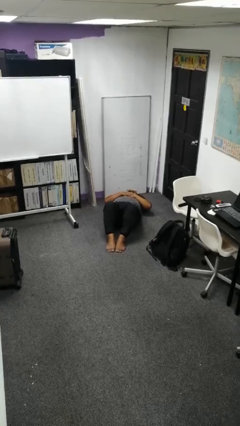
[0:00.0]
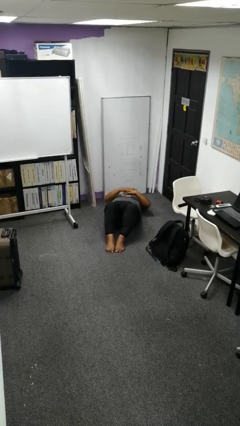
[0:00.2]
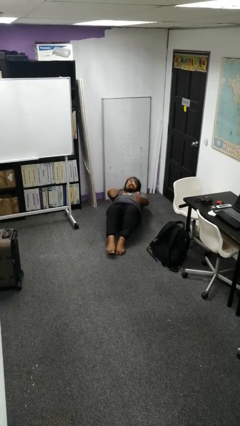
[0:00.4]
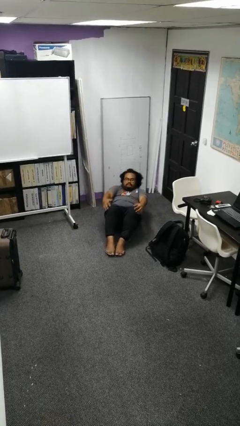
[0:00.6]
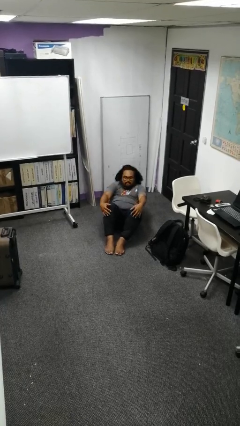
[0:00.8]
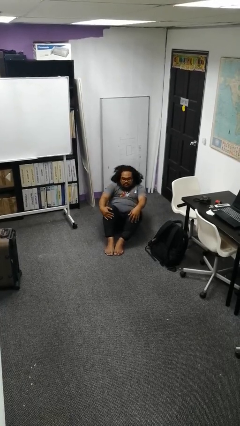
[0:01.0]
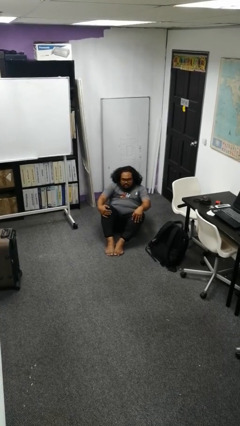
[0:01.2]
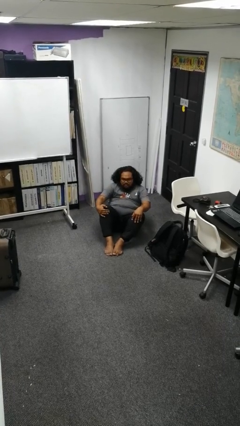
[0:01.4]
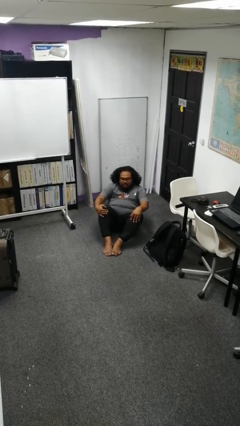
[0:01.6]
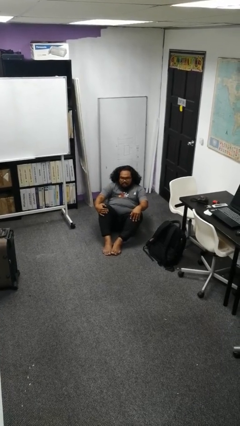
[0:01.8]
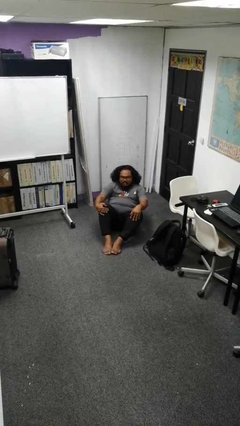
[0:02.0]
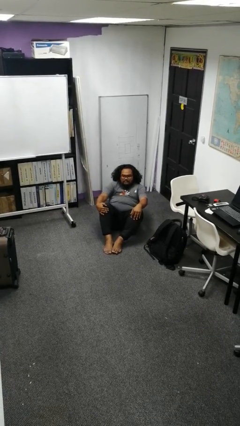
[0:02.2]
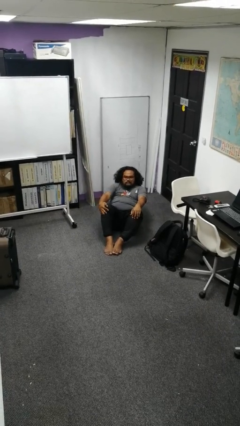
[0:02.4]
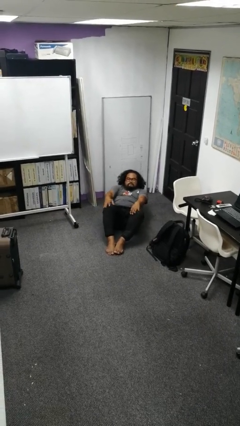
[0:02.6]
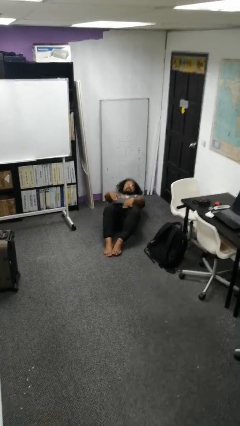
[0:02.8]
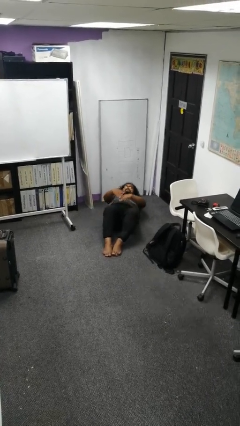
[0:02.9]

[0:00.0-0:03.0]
person exercises with situp

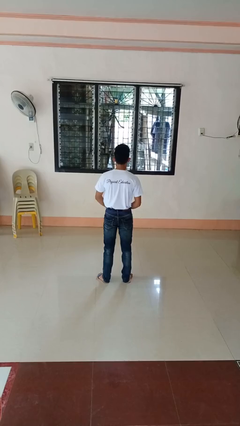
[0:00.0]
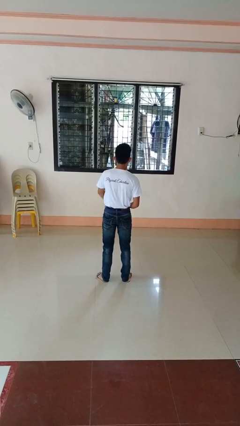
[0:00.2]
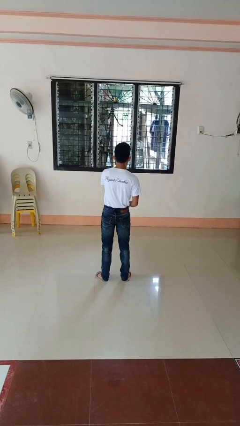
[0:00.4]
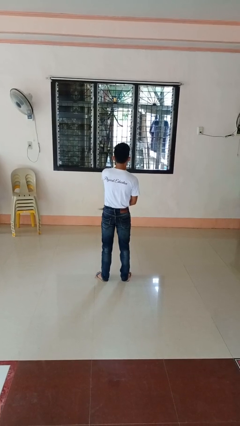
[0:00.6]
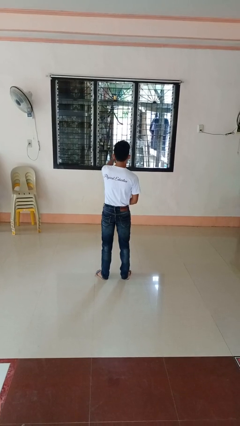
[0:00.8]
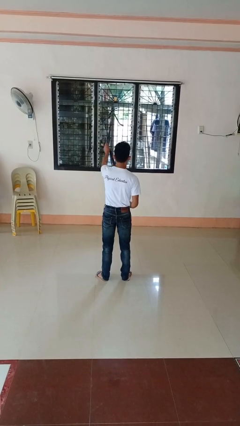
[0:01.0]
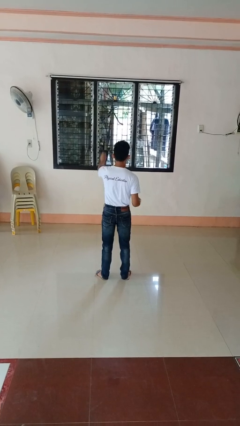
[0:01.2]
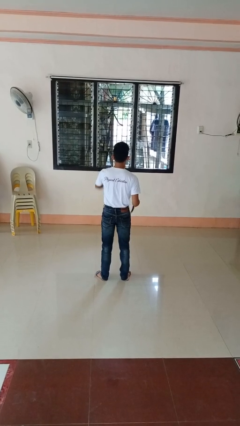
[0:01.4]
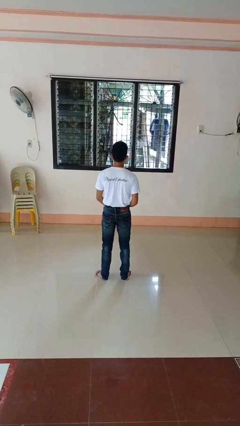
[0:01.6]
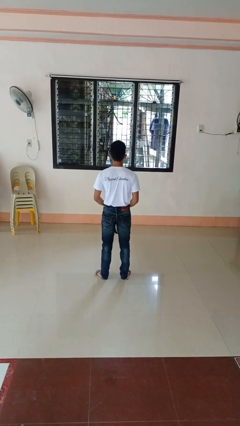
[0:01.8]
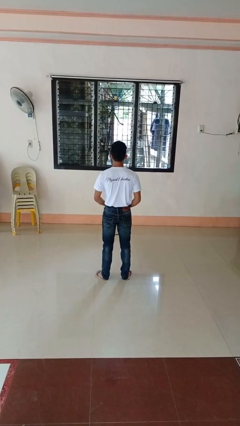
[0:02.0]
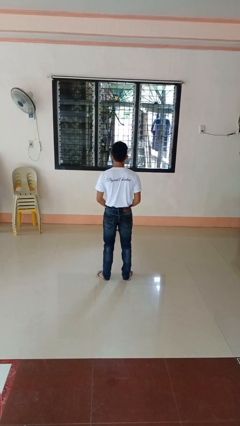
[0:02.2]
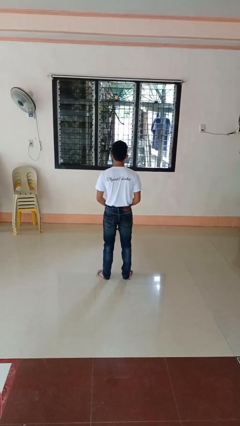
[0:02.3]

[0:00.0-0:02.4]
person takes off belt

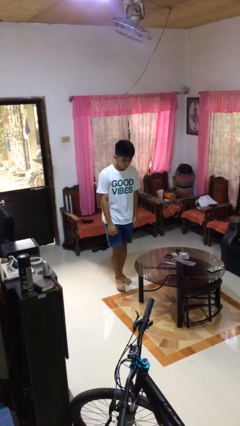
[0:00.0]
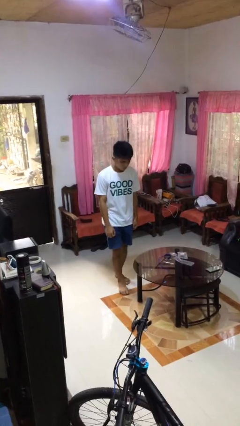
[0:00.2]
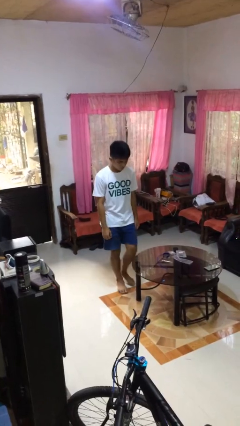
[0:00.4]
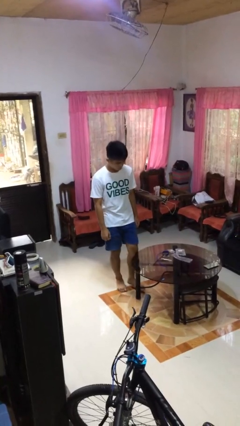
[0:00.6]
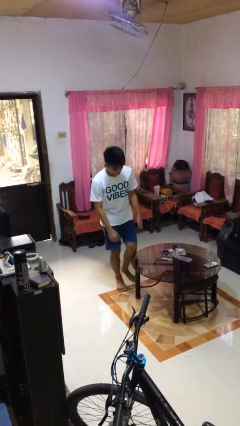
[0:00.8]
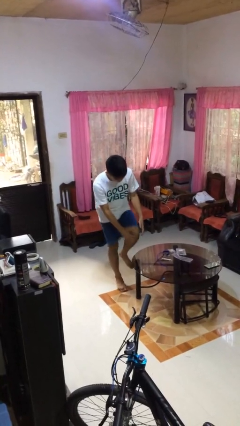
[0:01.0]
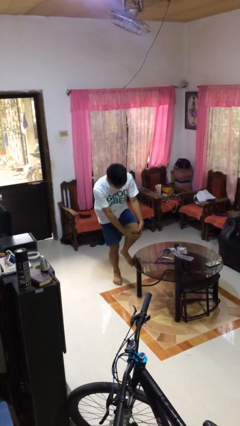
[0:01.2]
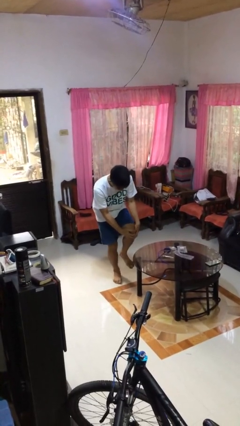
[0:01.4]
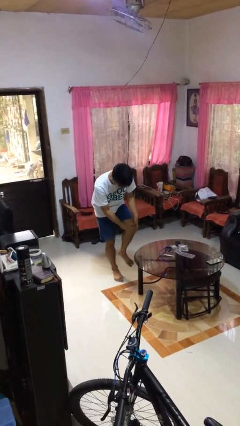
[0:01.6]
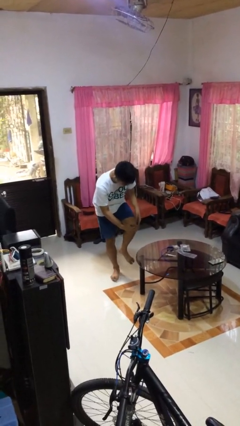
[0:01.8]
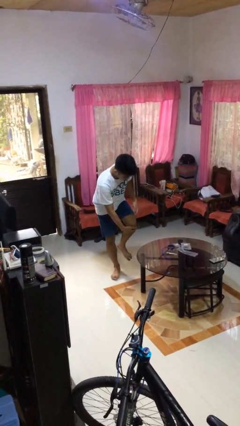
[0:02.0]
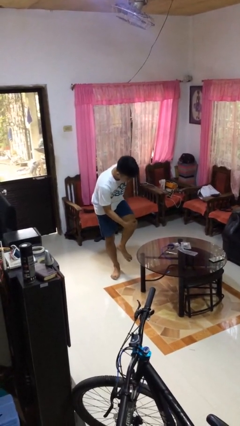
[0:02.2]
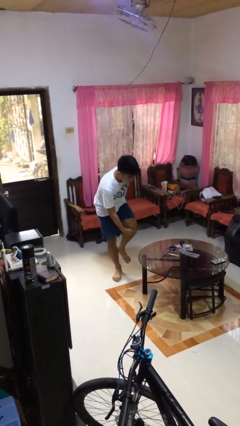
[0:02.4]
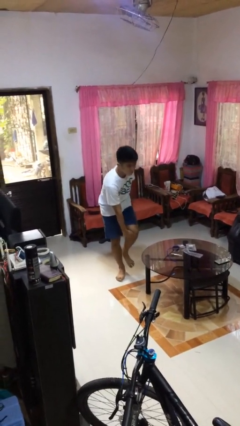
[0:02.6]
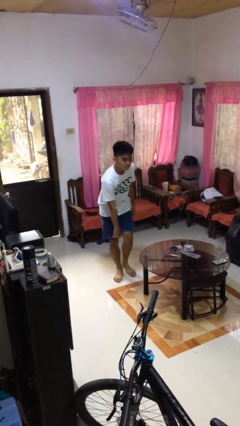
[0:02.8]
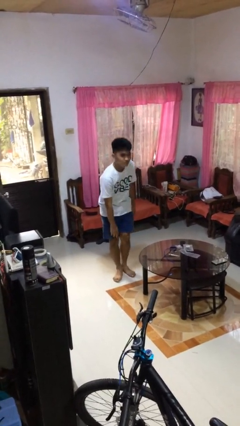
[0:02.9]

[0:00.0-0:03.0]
person bumps into table

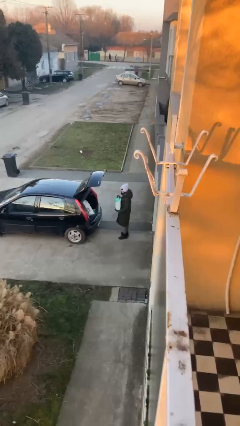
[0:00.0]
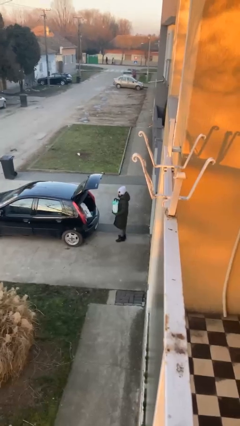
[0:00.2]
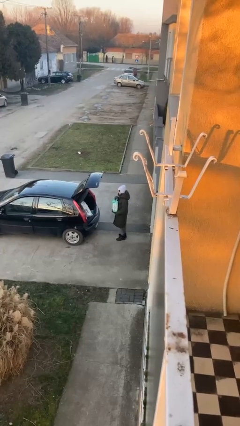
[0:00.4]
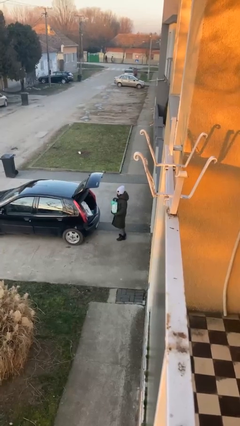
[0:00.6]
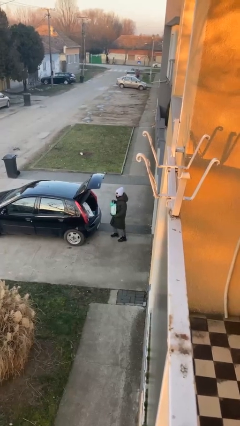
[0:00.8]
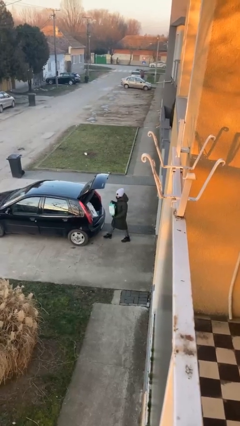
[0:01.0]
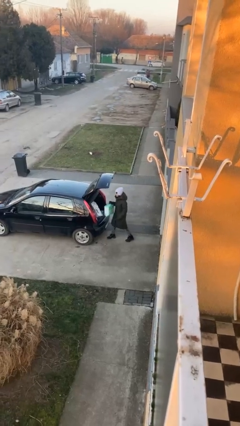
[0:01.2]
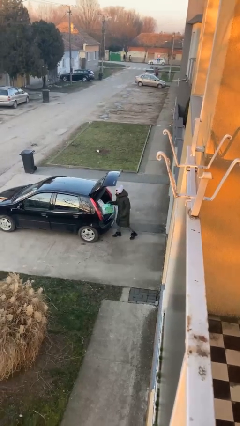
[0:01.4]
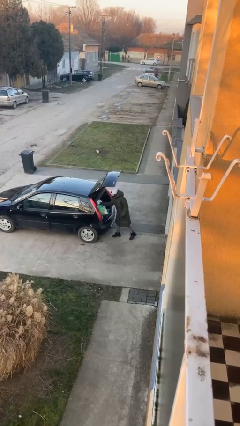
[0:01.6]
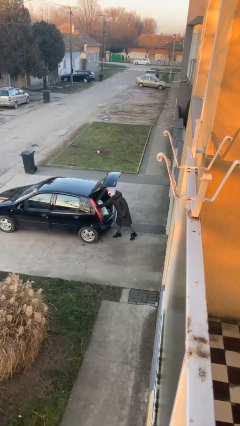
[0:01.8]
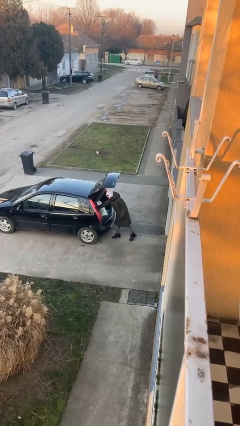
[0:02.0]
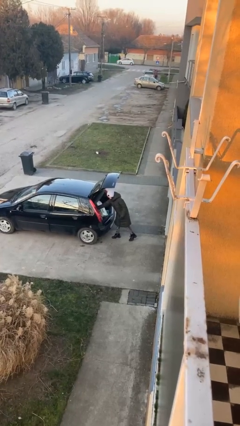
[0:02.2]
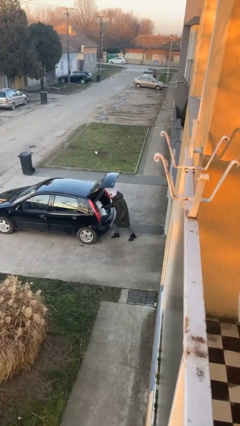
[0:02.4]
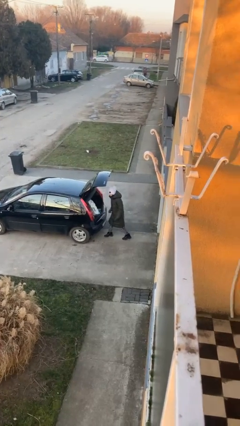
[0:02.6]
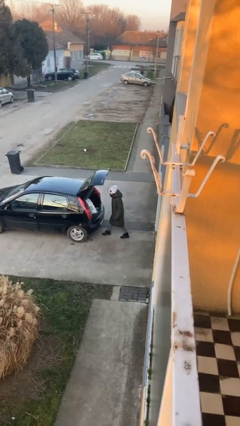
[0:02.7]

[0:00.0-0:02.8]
person loads car

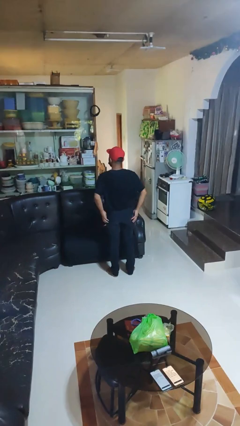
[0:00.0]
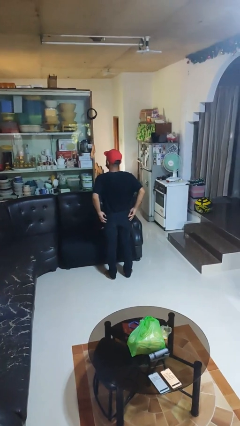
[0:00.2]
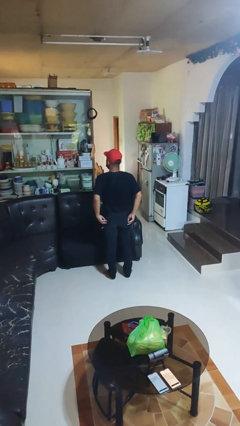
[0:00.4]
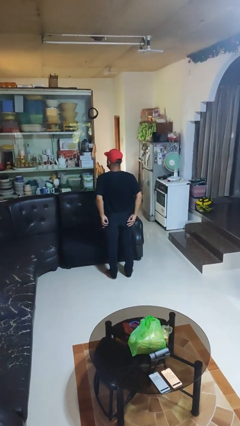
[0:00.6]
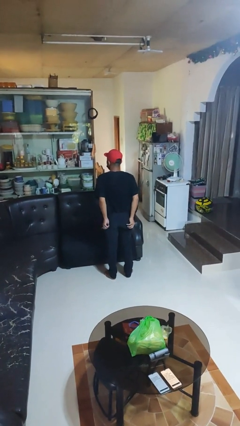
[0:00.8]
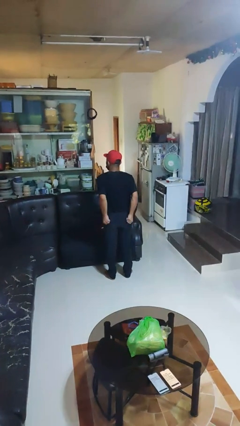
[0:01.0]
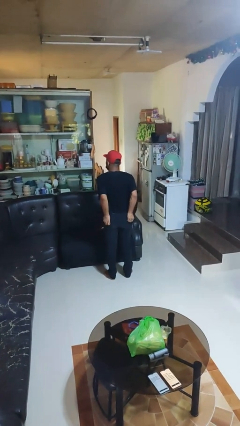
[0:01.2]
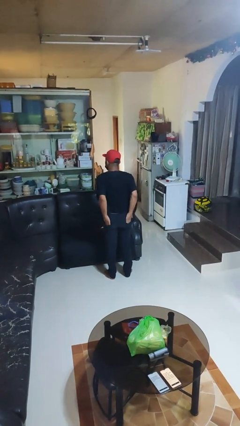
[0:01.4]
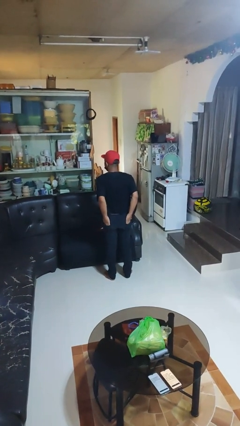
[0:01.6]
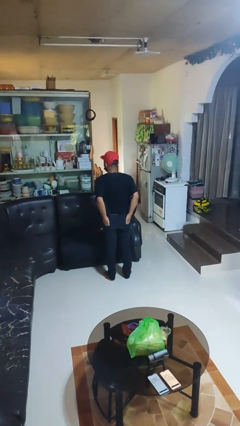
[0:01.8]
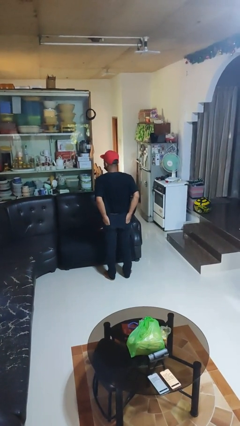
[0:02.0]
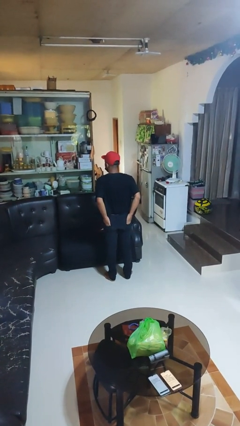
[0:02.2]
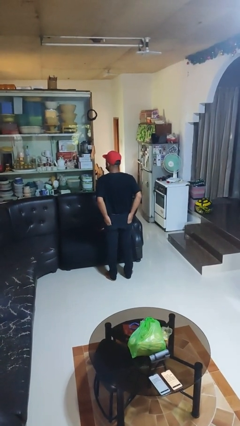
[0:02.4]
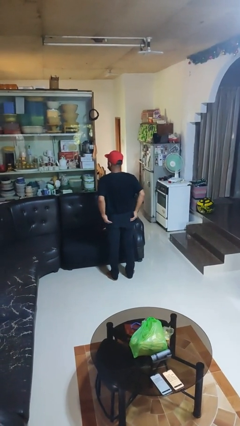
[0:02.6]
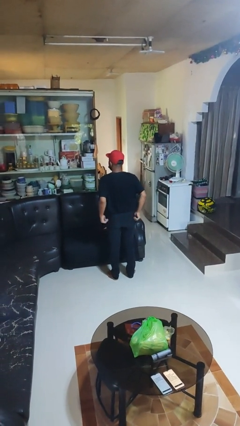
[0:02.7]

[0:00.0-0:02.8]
person takes off shirt

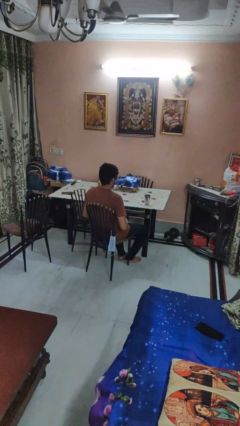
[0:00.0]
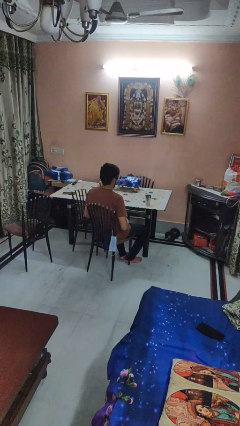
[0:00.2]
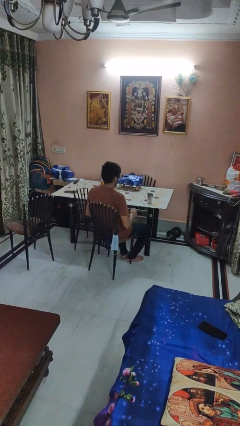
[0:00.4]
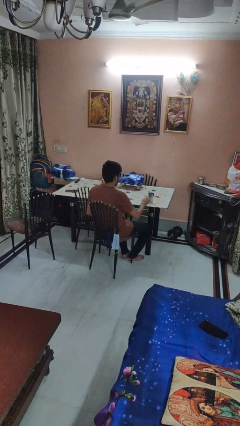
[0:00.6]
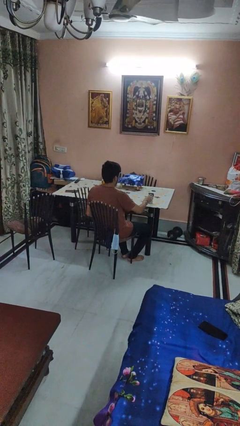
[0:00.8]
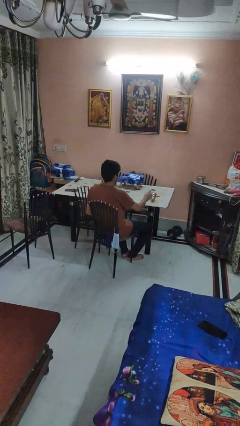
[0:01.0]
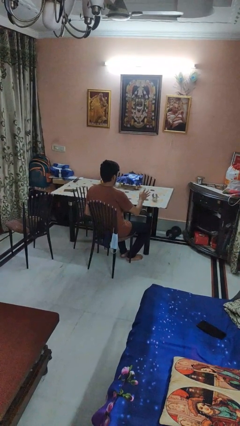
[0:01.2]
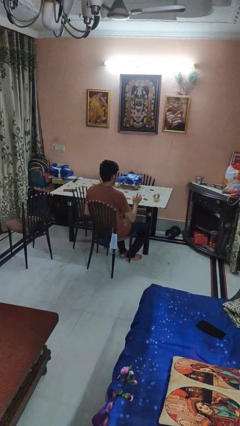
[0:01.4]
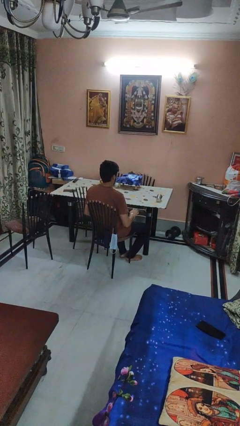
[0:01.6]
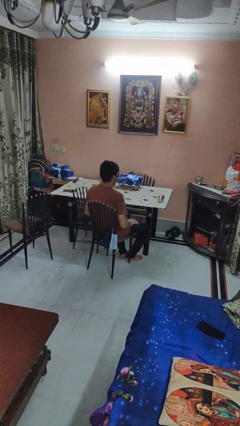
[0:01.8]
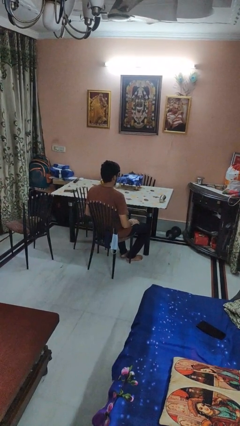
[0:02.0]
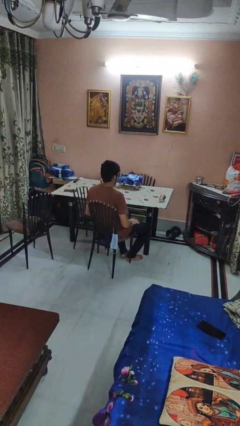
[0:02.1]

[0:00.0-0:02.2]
person knocks over glass

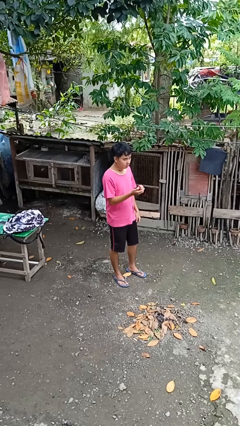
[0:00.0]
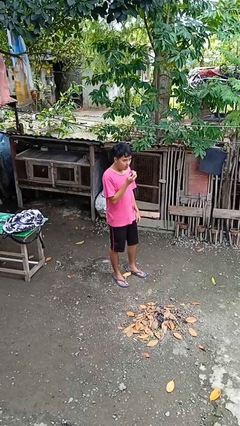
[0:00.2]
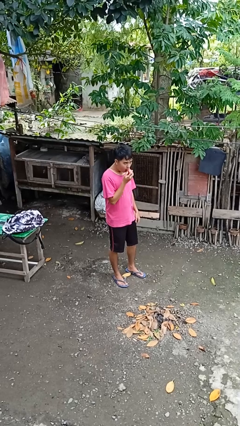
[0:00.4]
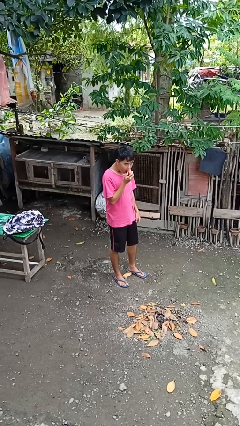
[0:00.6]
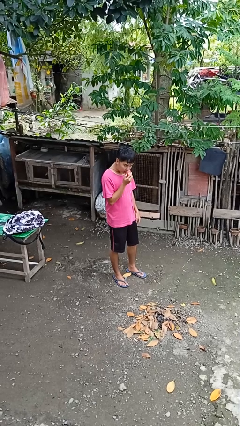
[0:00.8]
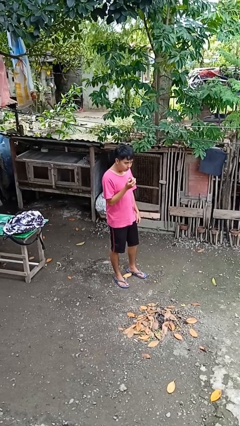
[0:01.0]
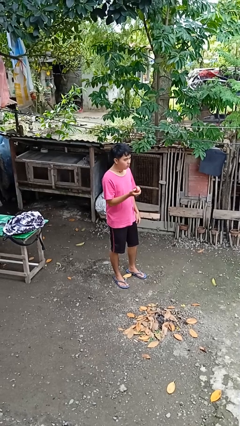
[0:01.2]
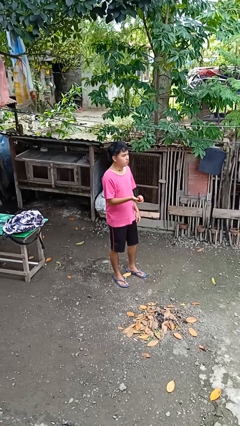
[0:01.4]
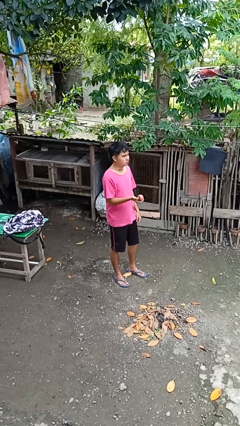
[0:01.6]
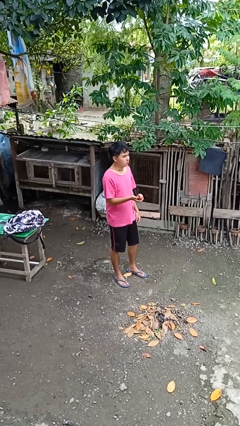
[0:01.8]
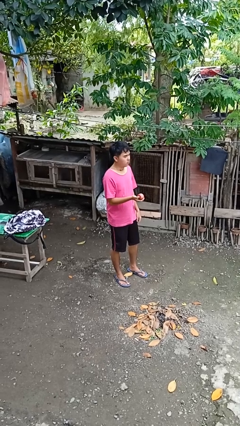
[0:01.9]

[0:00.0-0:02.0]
person eats apple
